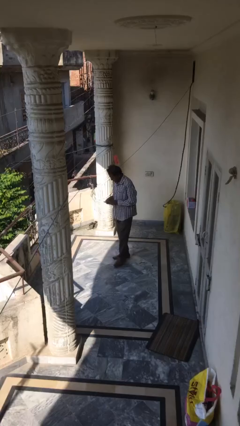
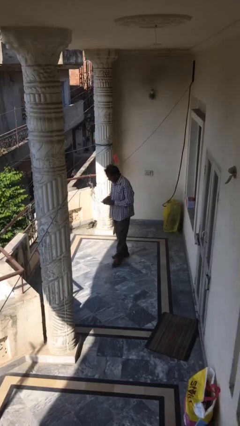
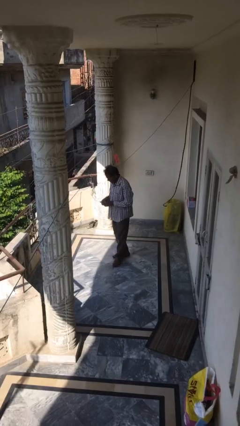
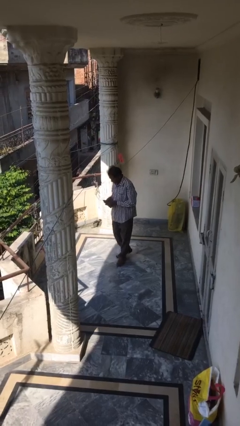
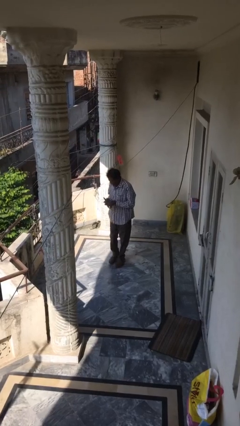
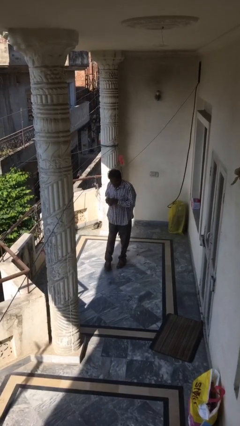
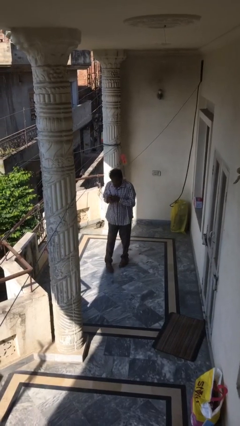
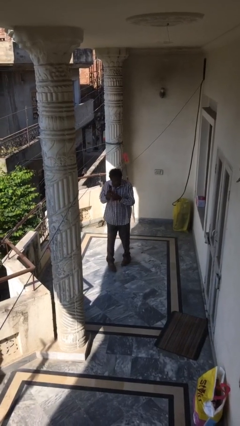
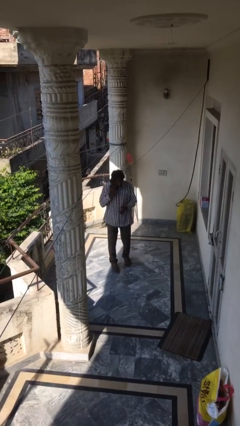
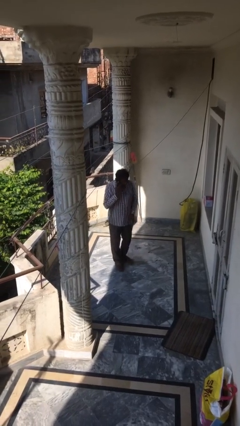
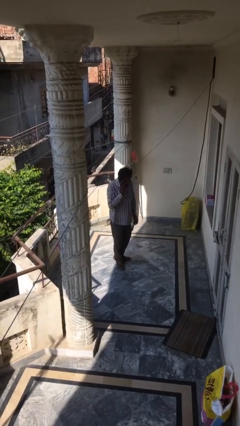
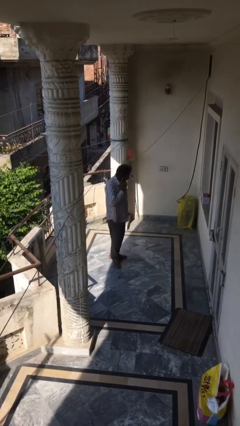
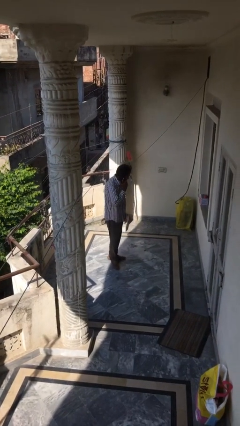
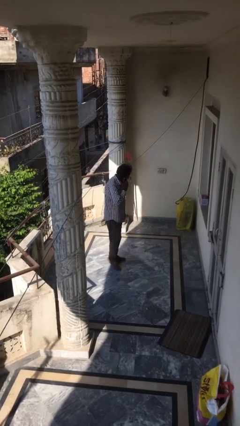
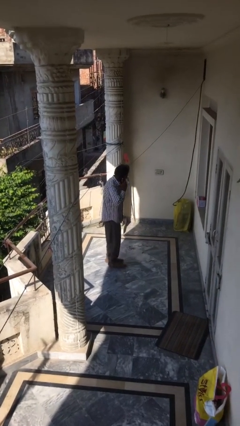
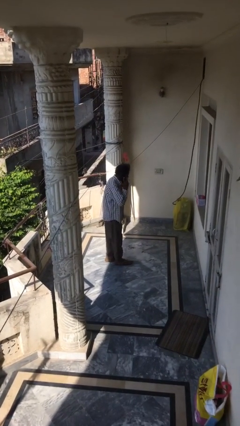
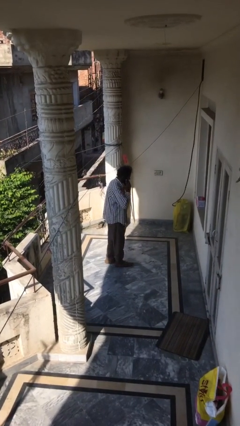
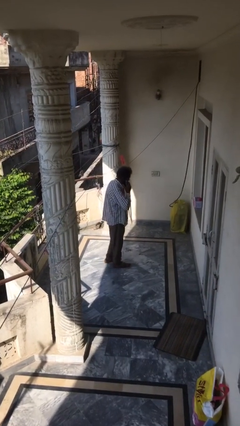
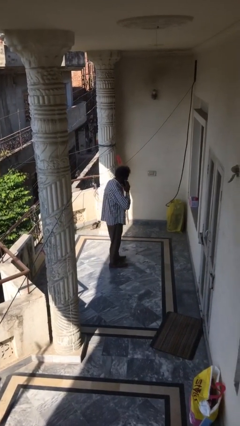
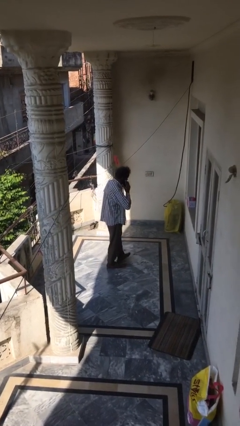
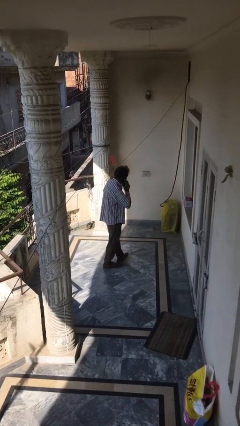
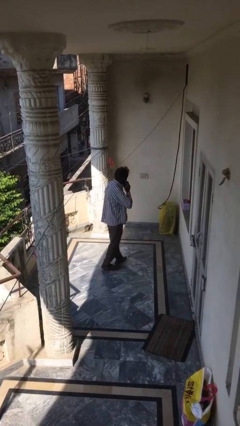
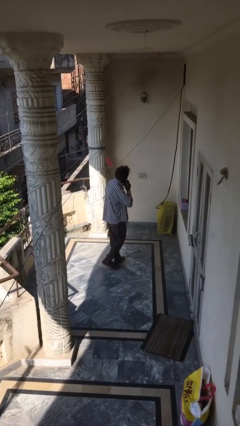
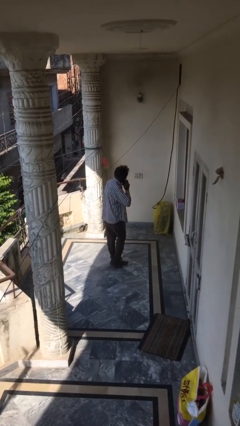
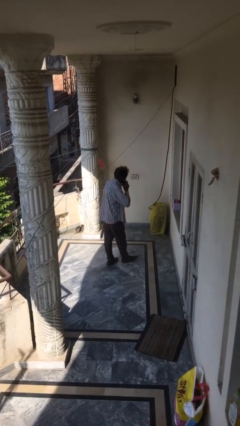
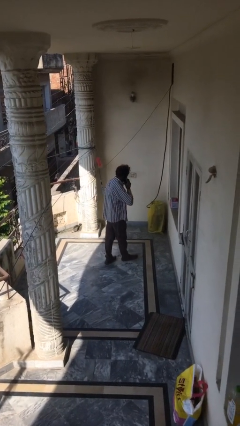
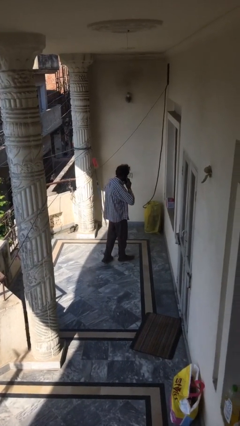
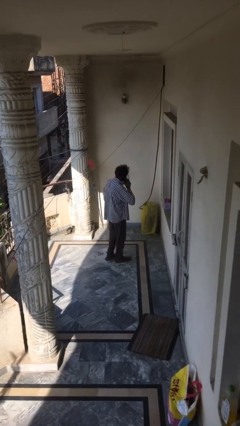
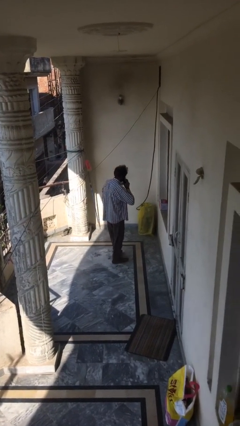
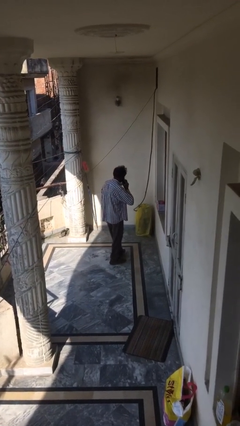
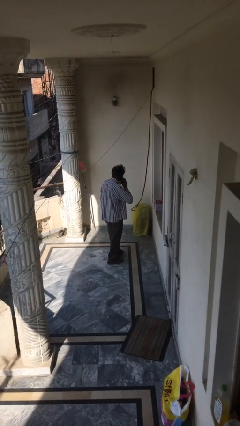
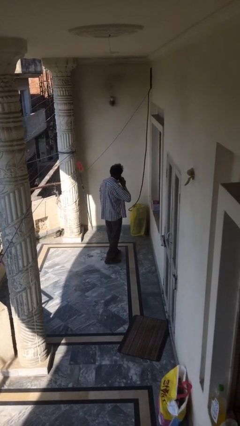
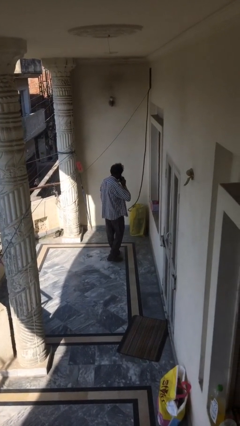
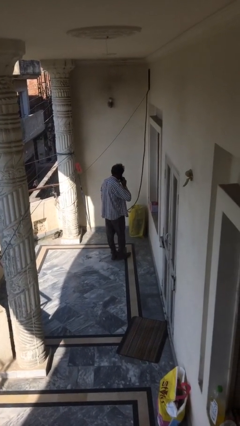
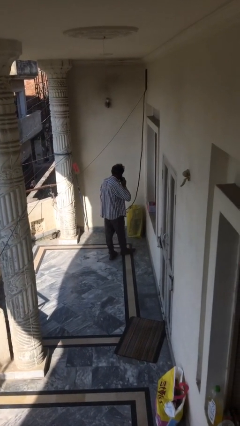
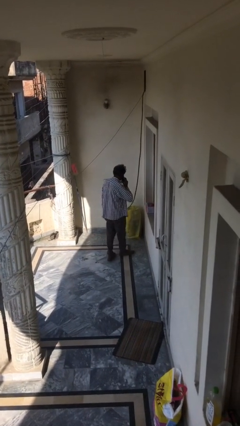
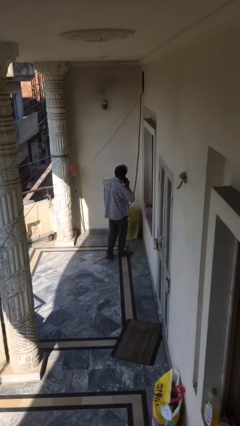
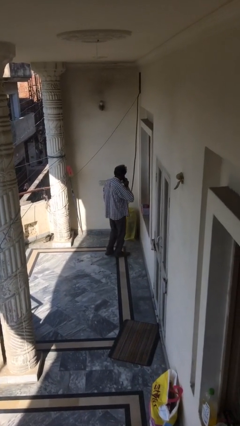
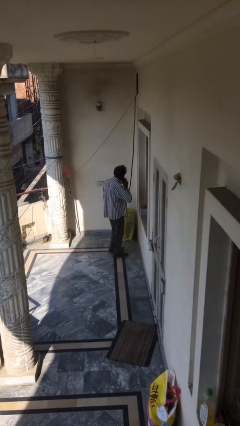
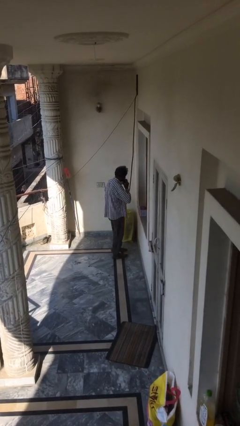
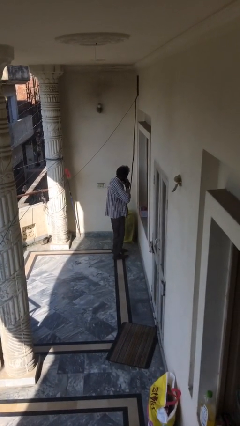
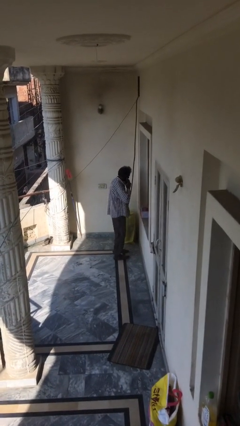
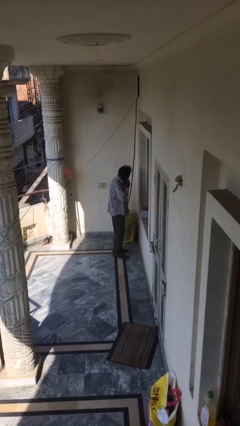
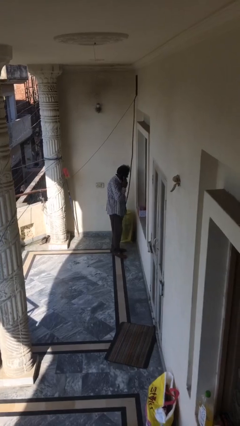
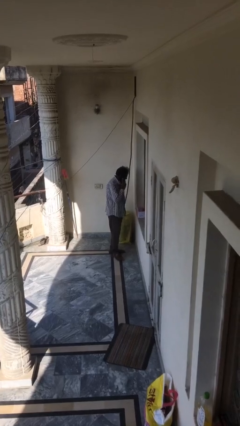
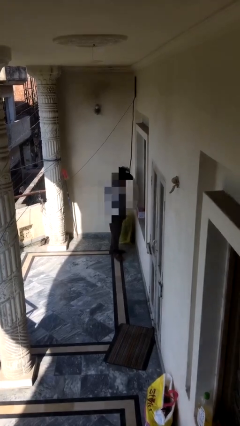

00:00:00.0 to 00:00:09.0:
person talks on phone

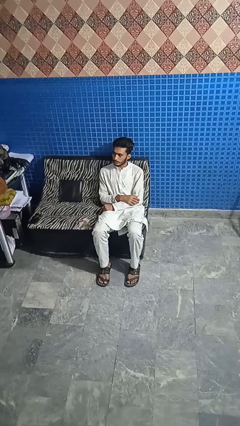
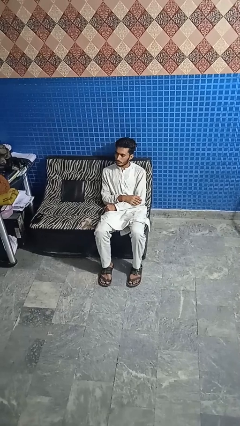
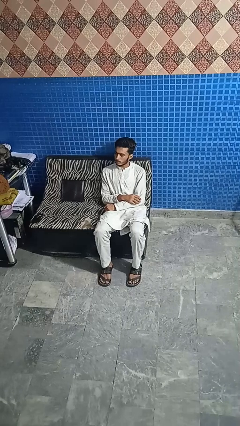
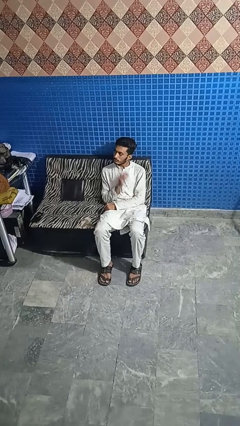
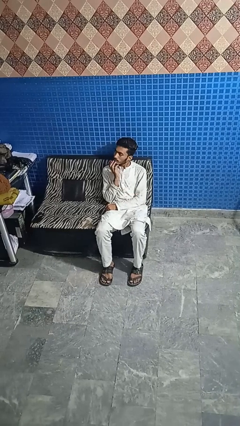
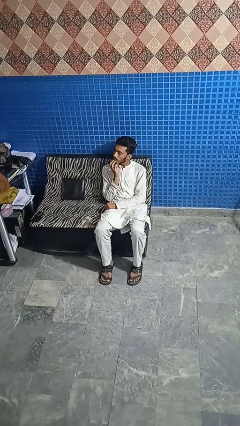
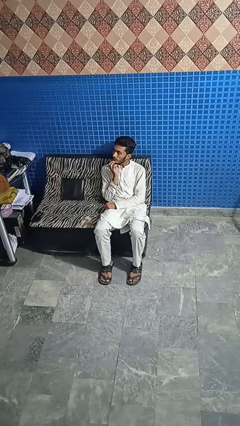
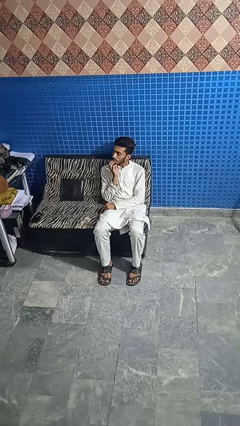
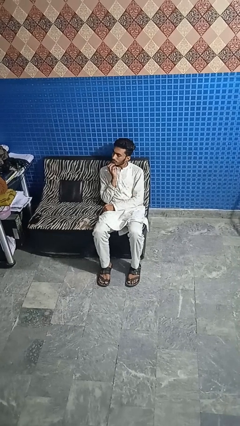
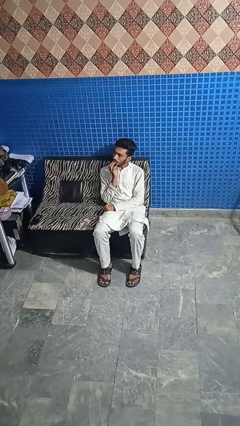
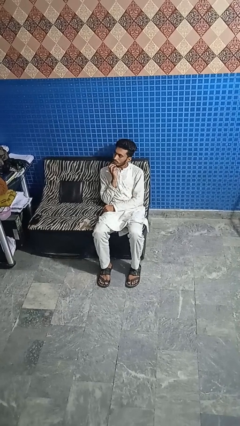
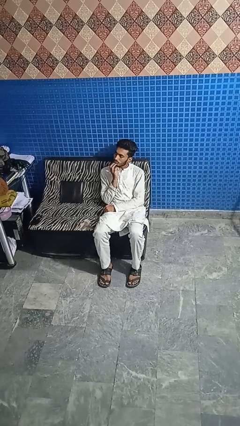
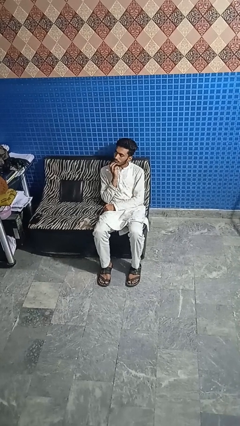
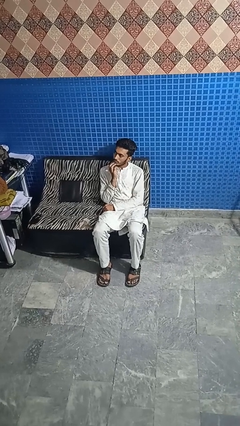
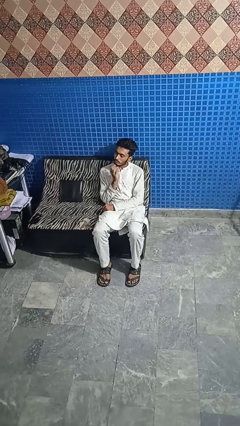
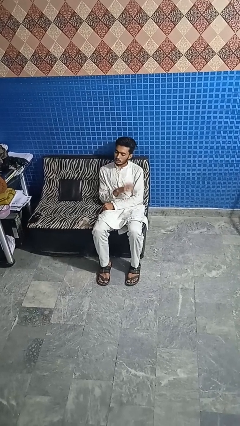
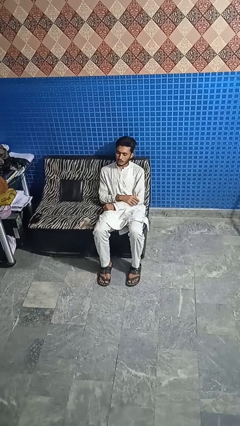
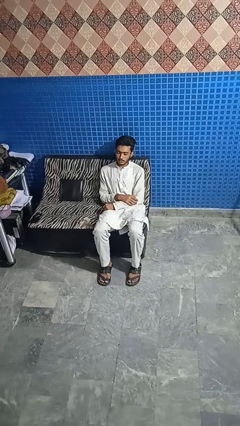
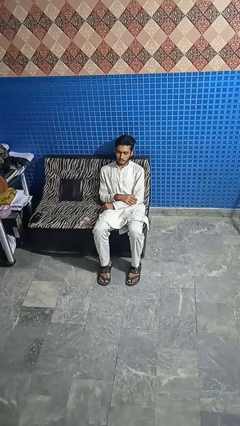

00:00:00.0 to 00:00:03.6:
person strokes chin

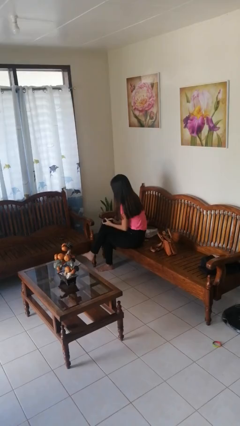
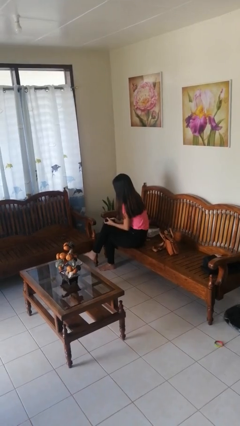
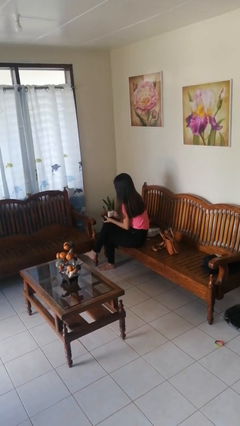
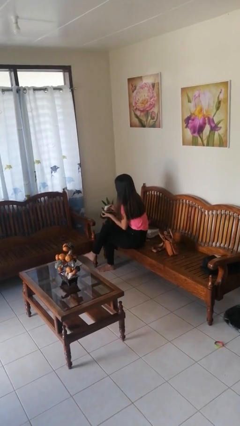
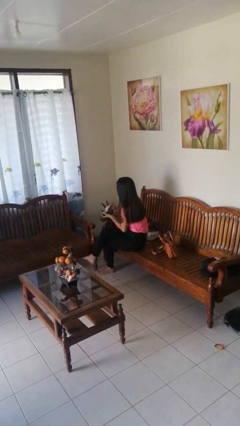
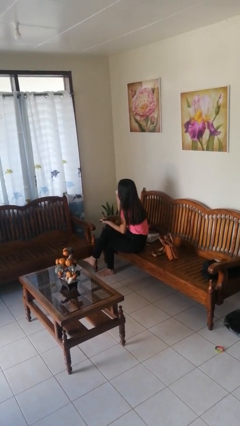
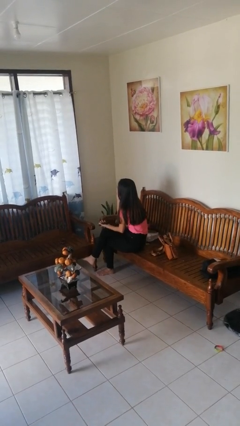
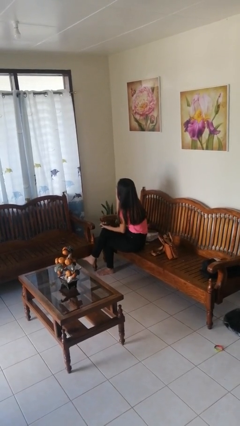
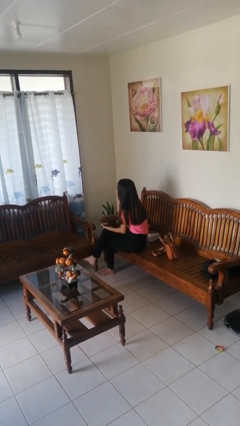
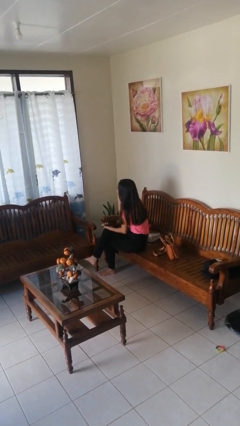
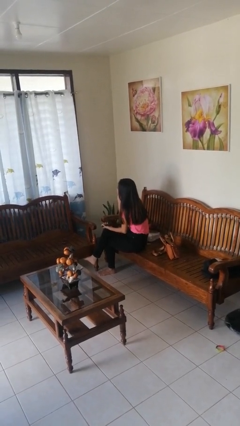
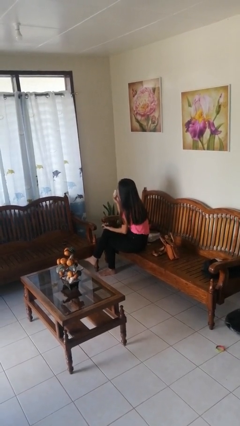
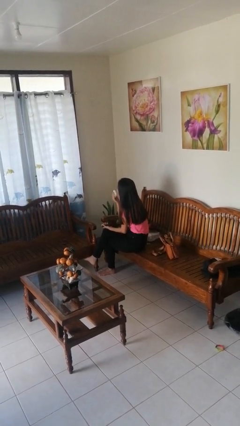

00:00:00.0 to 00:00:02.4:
person applies foundation makeup

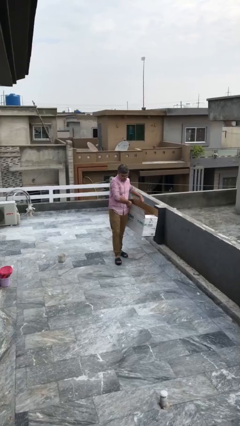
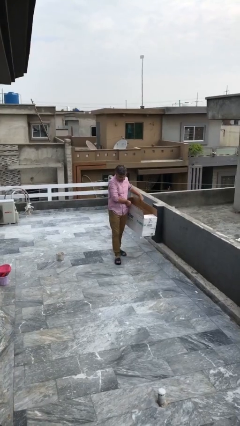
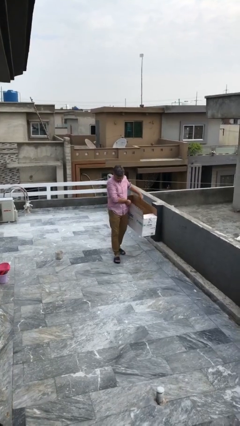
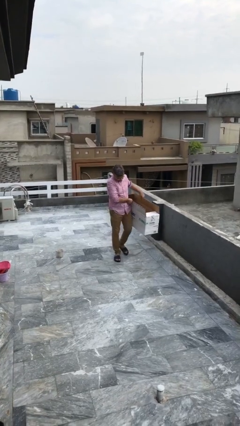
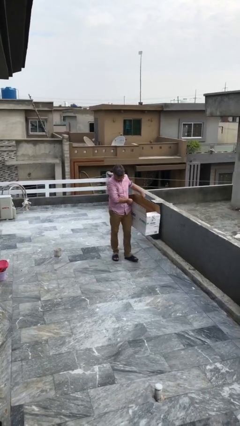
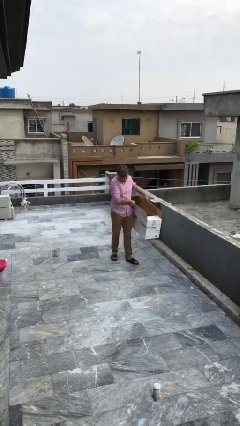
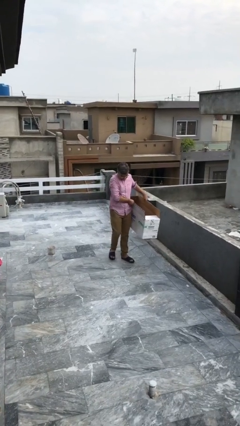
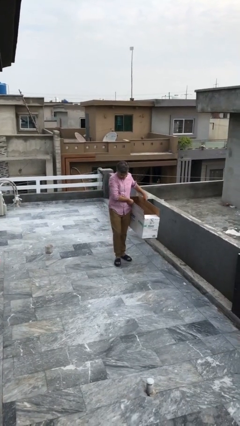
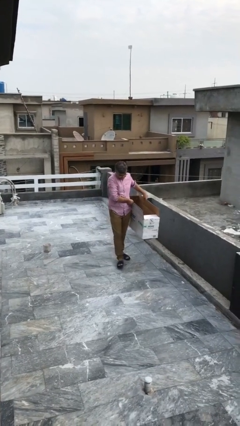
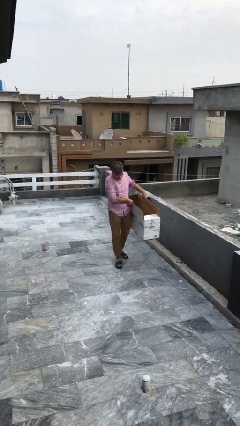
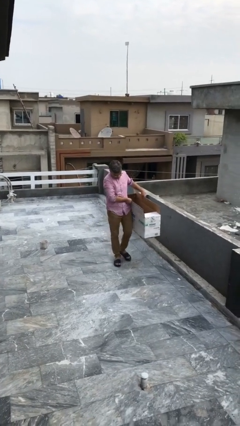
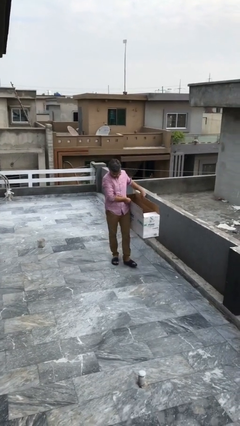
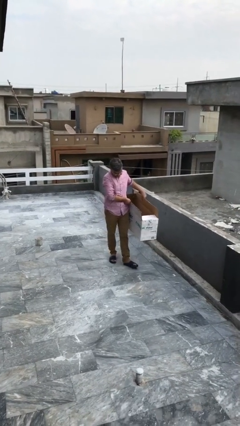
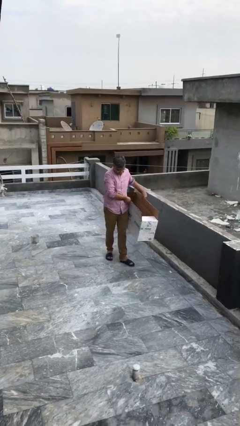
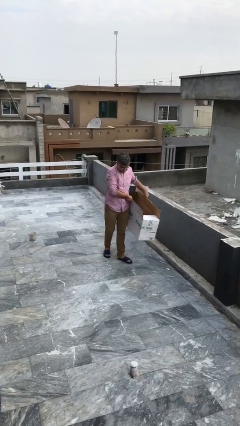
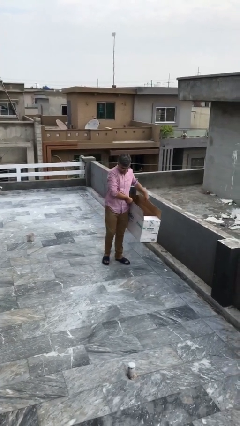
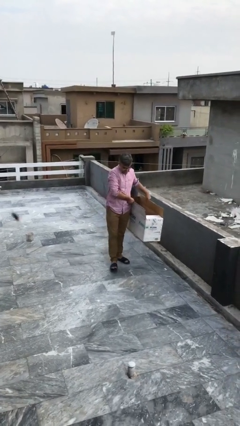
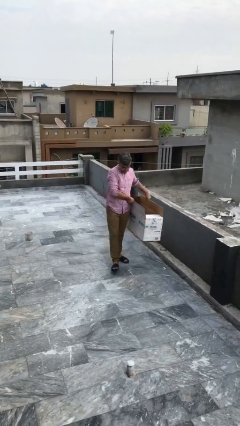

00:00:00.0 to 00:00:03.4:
person carries heavy object
